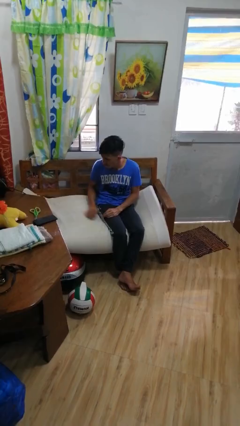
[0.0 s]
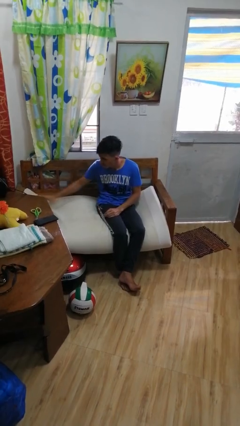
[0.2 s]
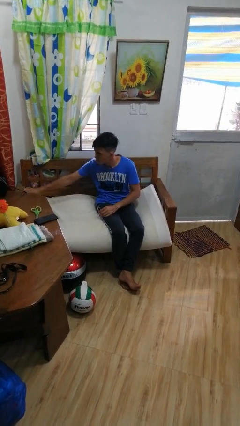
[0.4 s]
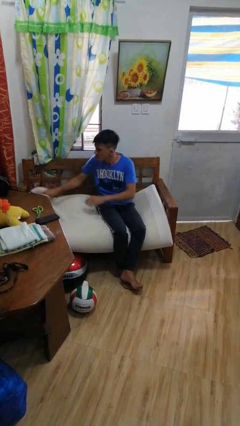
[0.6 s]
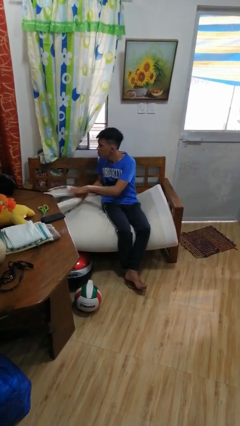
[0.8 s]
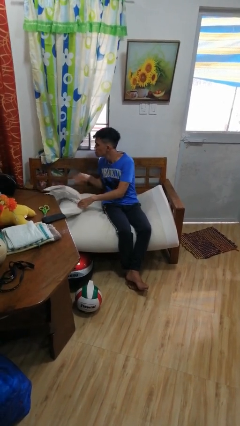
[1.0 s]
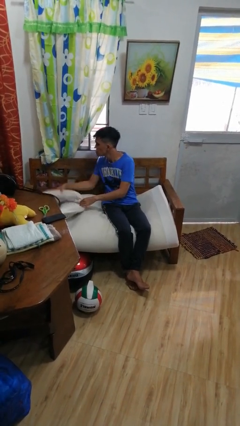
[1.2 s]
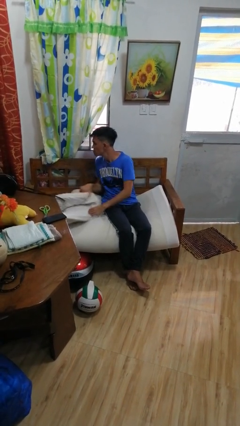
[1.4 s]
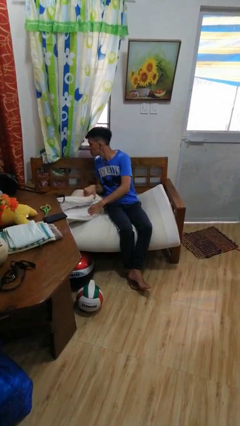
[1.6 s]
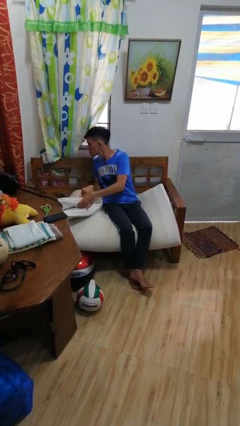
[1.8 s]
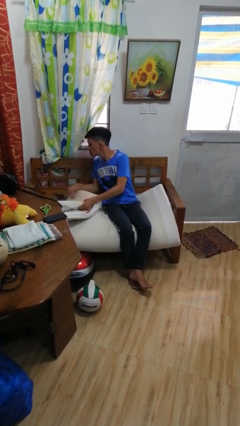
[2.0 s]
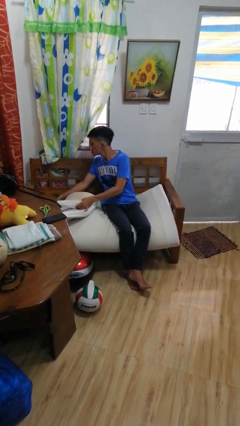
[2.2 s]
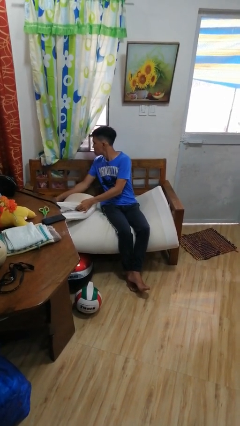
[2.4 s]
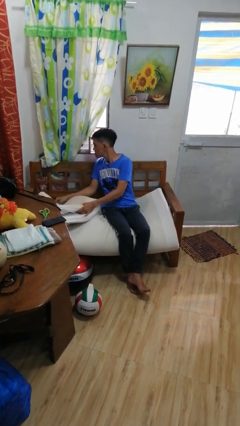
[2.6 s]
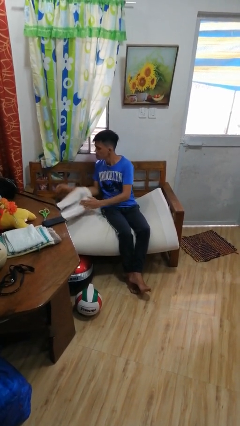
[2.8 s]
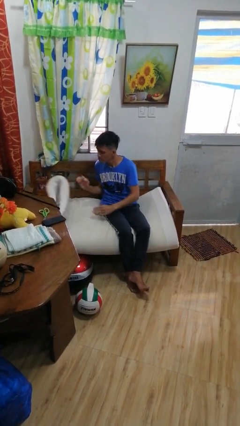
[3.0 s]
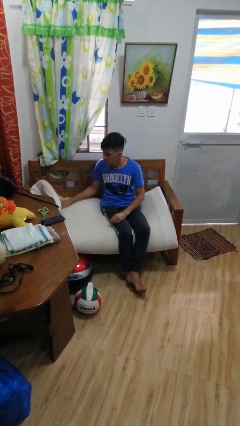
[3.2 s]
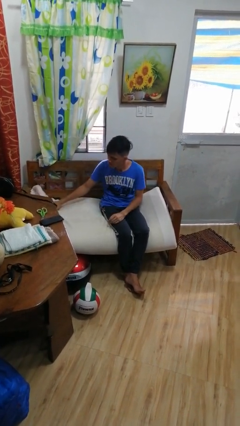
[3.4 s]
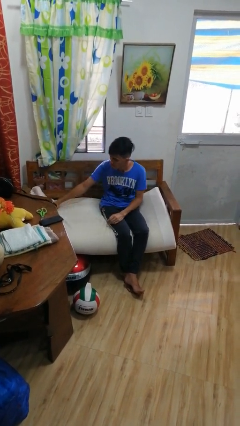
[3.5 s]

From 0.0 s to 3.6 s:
person searches in couch

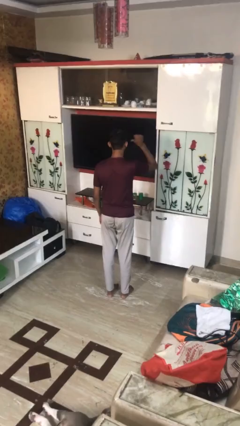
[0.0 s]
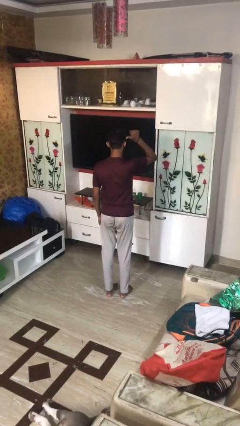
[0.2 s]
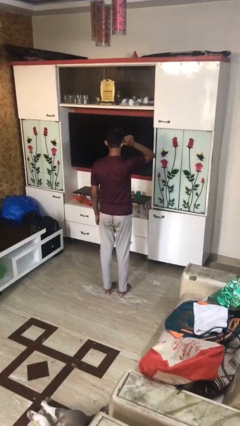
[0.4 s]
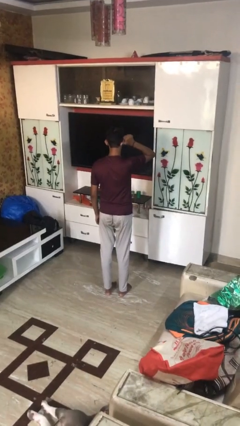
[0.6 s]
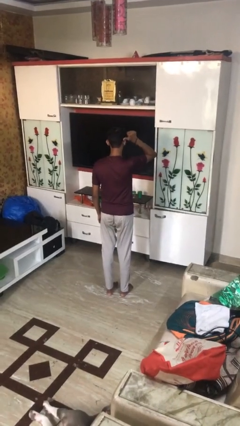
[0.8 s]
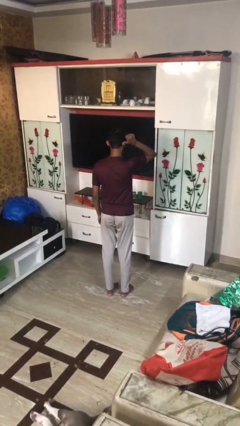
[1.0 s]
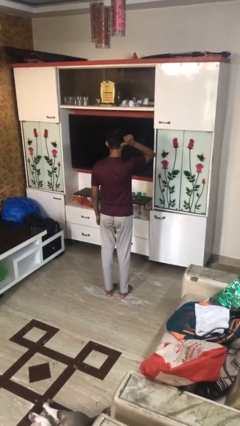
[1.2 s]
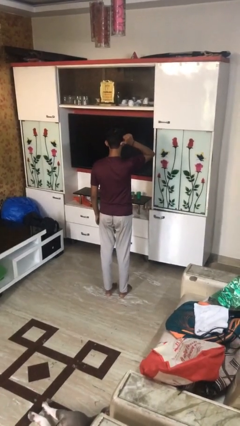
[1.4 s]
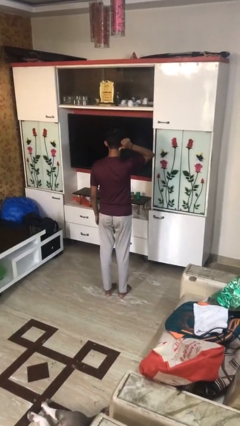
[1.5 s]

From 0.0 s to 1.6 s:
person gestures behind me

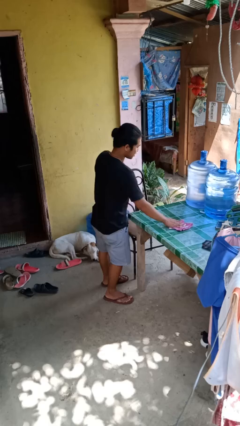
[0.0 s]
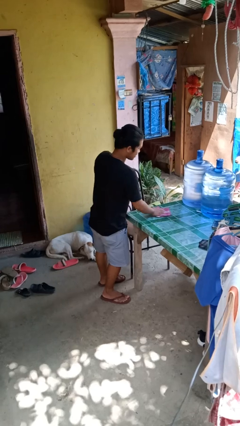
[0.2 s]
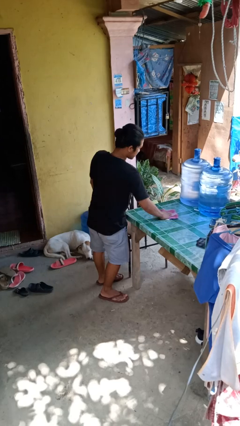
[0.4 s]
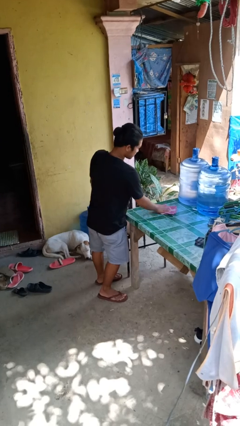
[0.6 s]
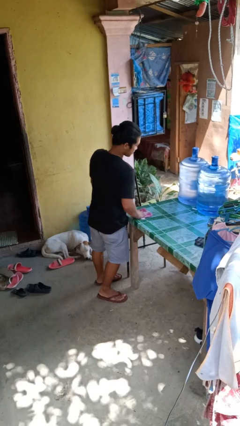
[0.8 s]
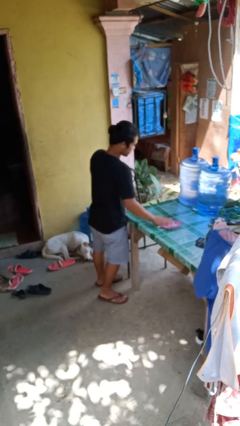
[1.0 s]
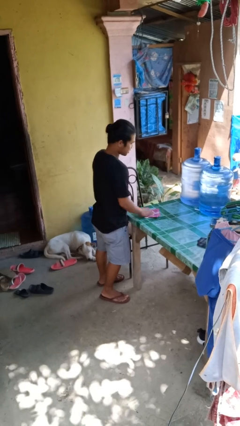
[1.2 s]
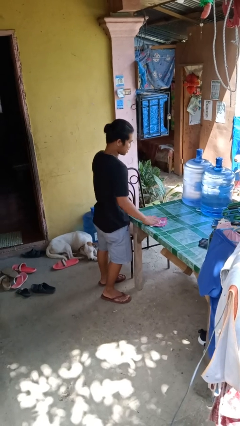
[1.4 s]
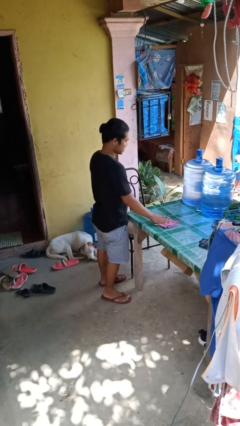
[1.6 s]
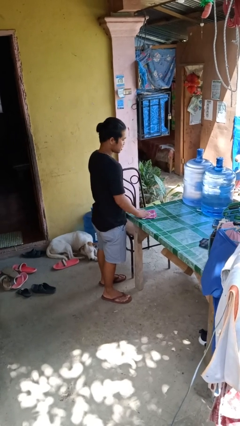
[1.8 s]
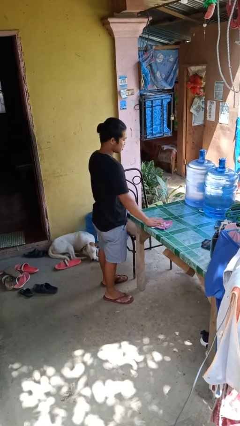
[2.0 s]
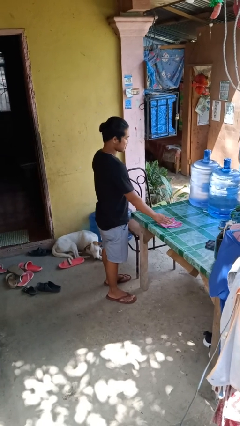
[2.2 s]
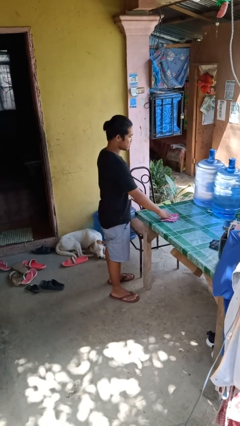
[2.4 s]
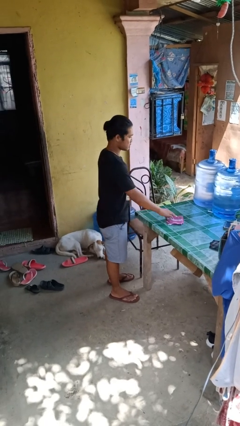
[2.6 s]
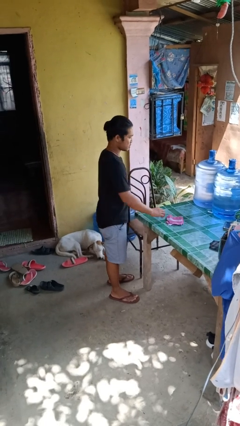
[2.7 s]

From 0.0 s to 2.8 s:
person cleans table with rag

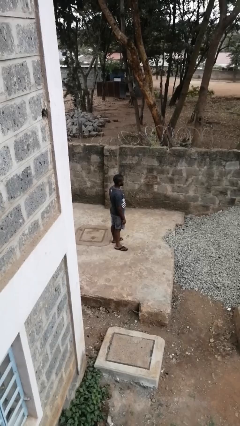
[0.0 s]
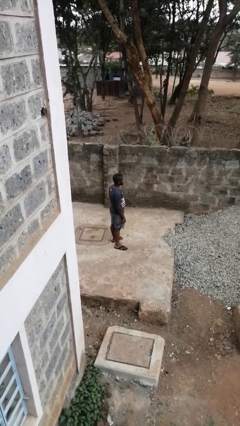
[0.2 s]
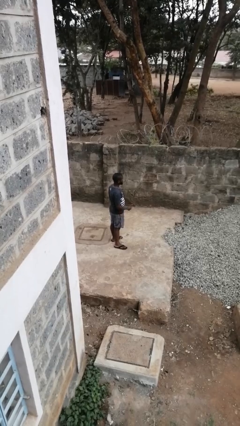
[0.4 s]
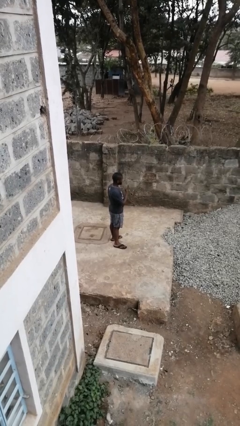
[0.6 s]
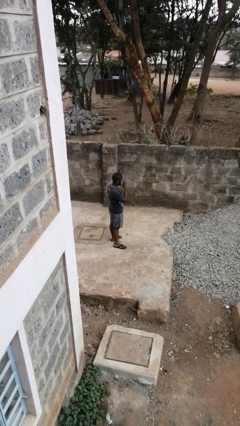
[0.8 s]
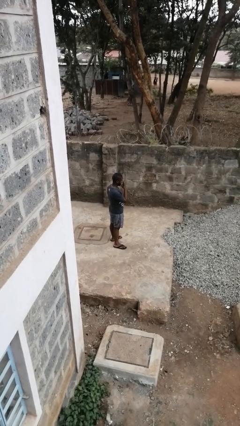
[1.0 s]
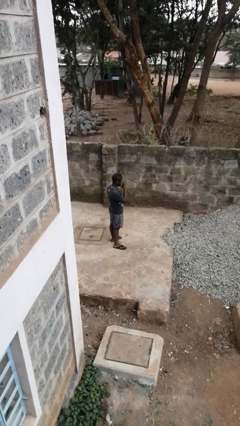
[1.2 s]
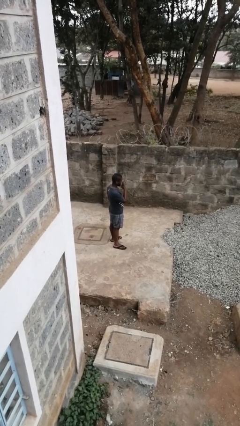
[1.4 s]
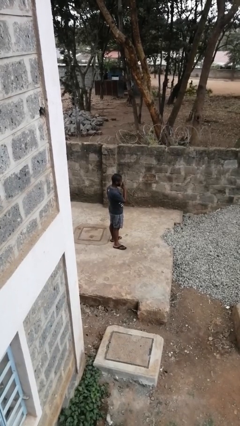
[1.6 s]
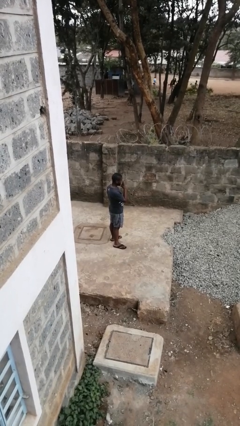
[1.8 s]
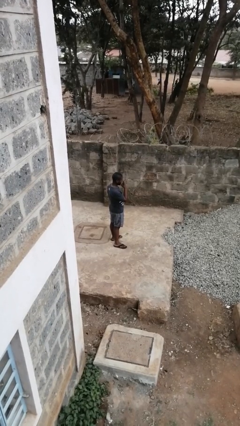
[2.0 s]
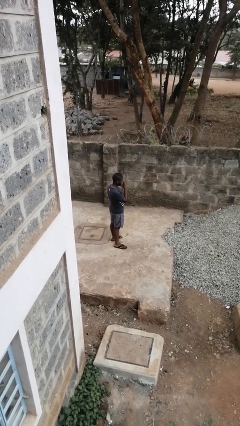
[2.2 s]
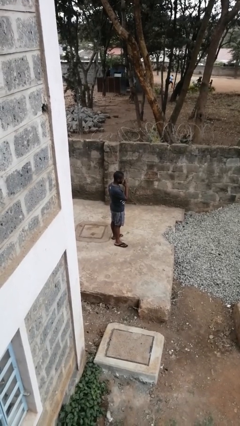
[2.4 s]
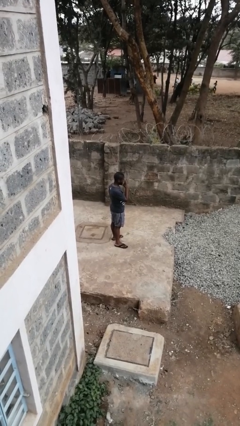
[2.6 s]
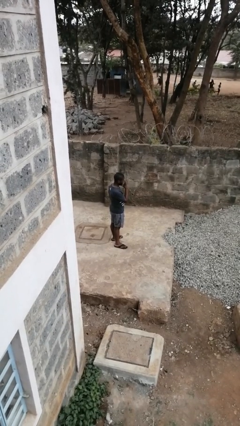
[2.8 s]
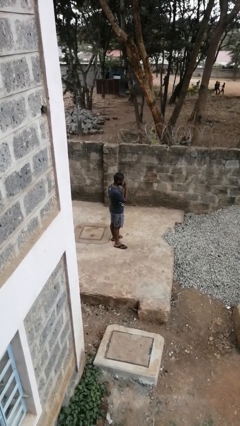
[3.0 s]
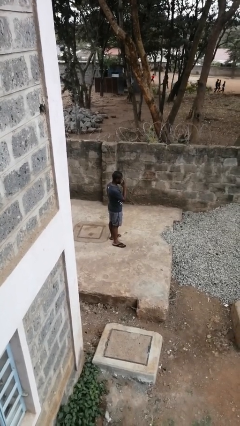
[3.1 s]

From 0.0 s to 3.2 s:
person gestures watch closely

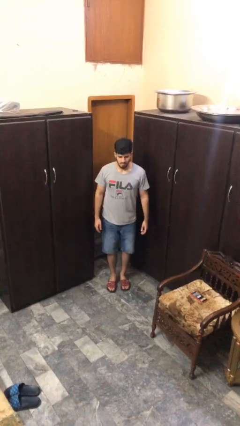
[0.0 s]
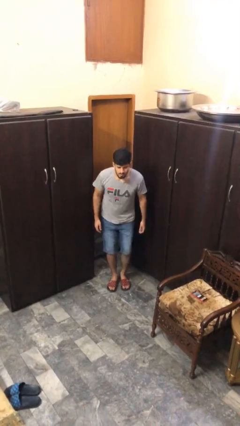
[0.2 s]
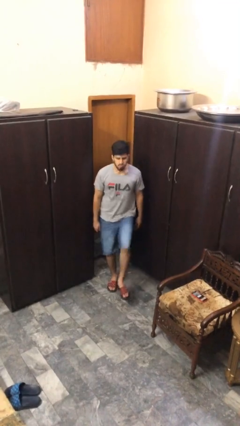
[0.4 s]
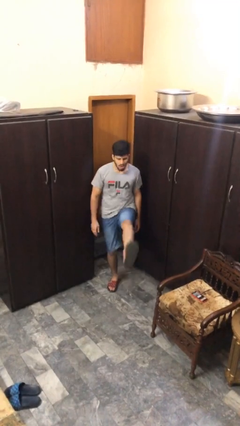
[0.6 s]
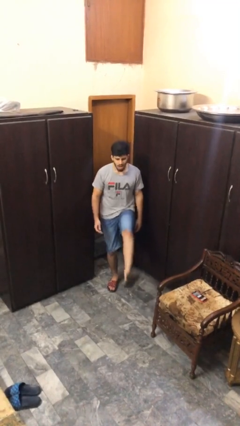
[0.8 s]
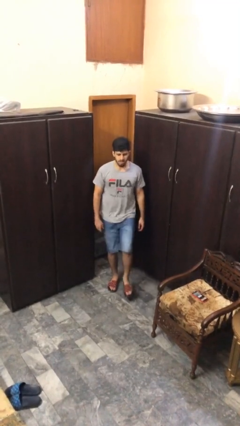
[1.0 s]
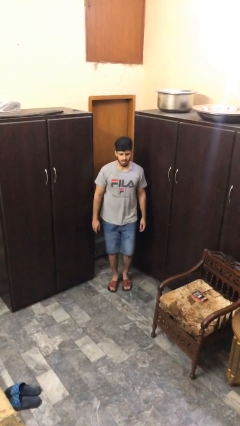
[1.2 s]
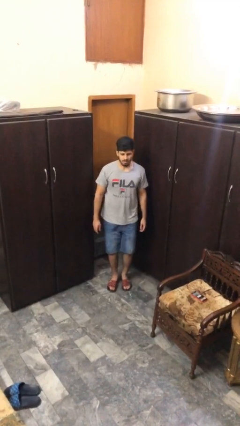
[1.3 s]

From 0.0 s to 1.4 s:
person karate kicks

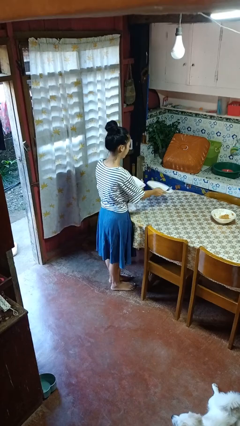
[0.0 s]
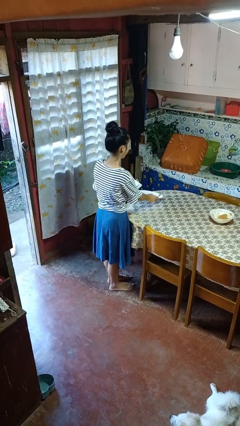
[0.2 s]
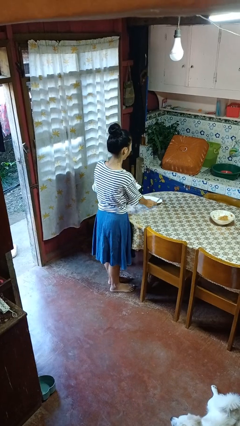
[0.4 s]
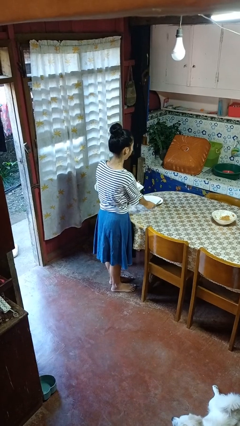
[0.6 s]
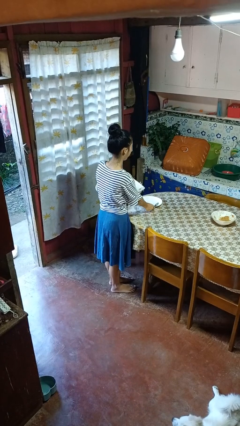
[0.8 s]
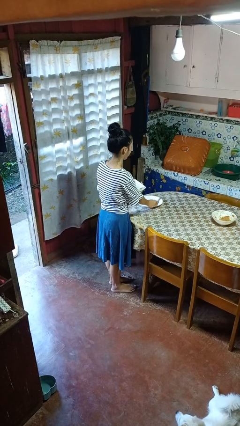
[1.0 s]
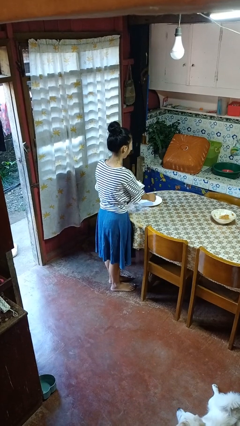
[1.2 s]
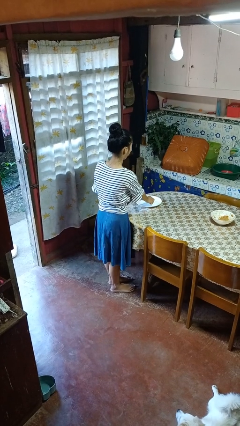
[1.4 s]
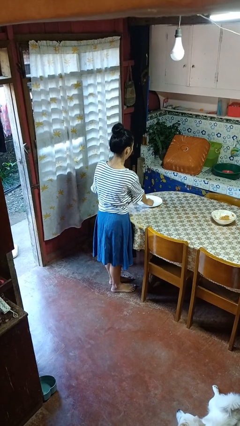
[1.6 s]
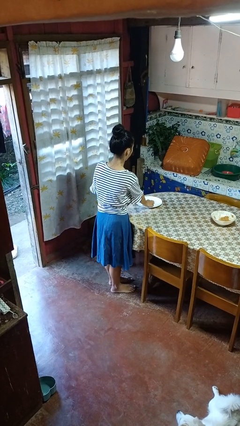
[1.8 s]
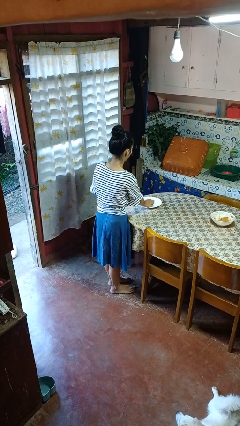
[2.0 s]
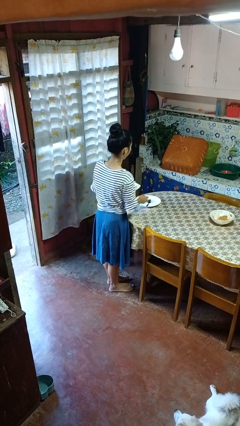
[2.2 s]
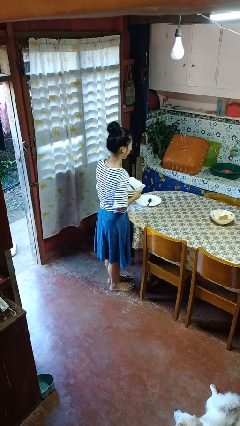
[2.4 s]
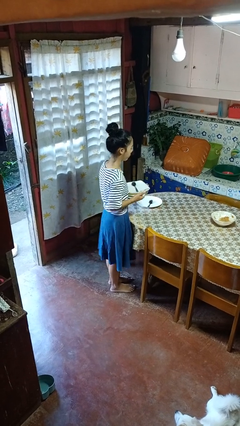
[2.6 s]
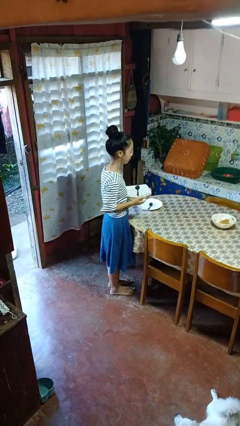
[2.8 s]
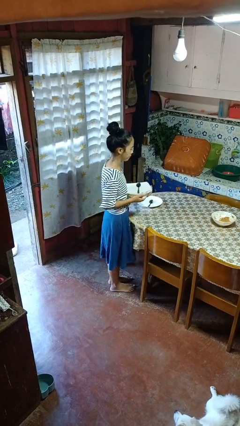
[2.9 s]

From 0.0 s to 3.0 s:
person sets table

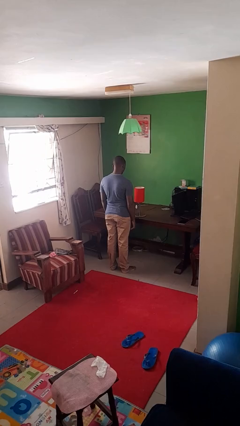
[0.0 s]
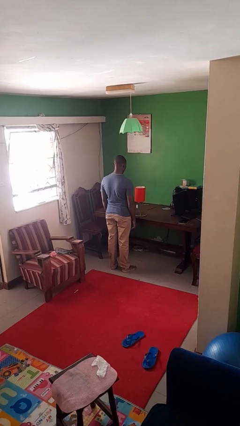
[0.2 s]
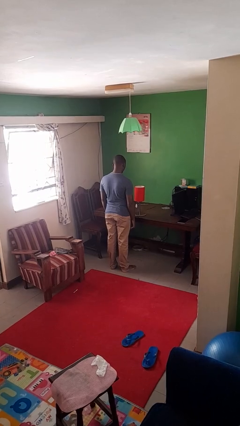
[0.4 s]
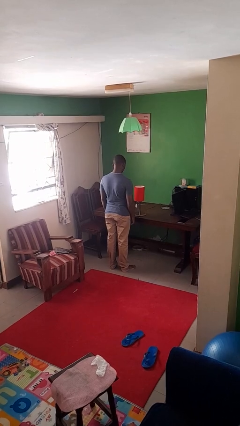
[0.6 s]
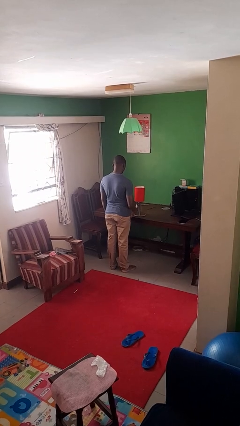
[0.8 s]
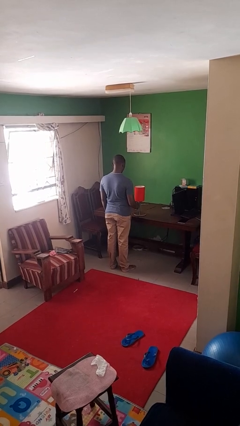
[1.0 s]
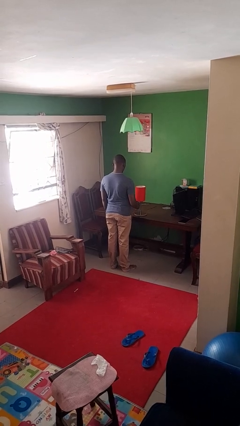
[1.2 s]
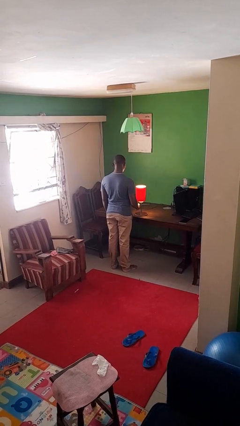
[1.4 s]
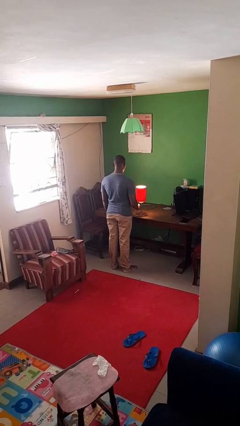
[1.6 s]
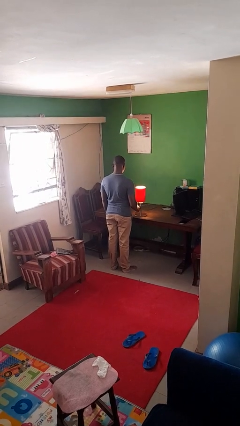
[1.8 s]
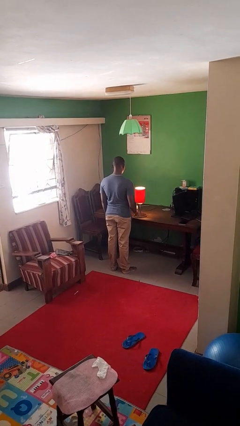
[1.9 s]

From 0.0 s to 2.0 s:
person turns on lamp
